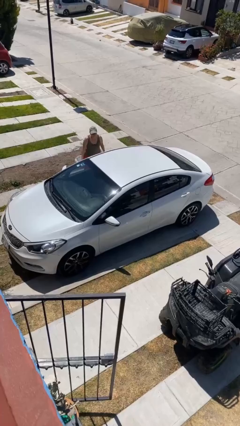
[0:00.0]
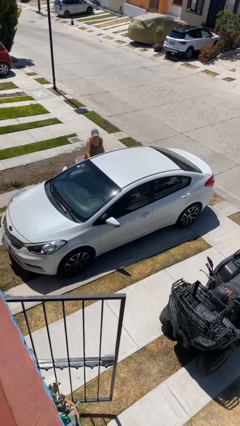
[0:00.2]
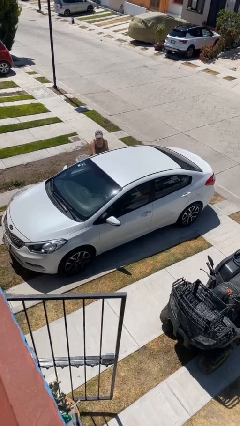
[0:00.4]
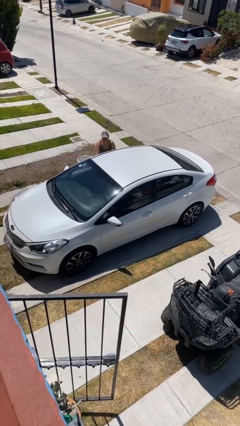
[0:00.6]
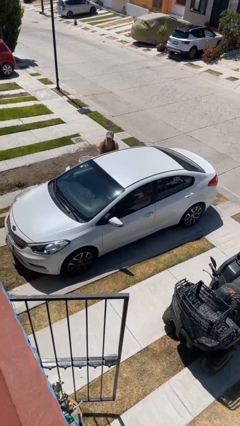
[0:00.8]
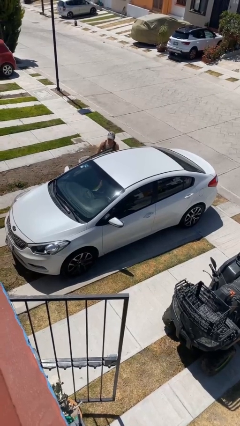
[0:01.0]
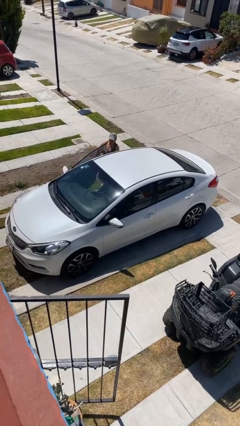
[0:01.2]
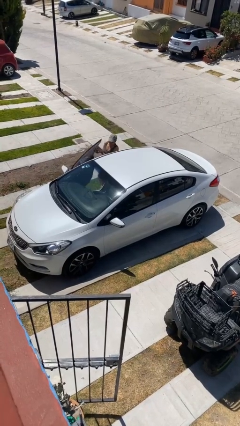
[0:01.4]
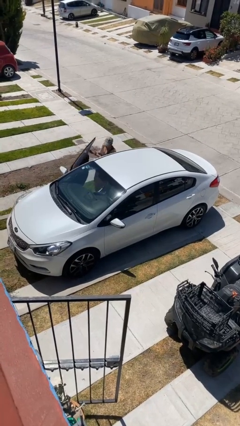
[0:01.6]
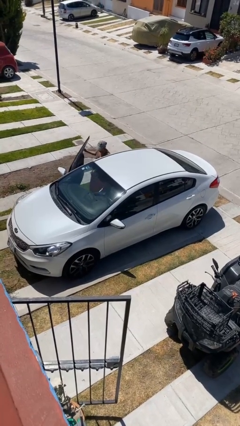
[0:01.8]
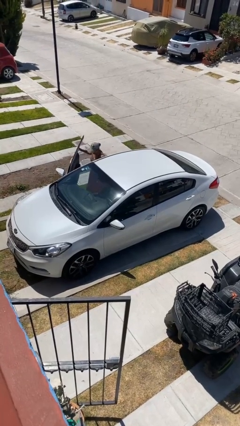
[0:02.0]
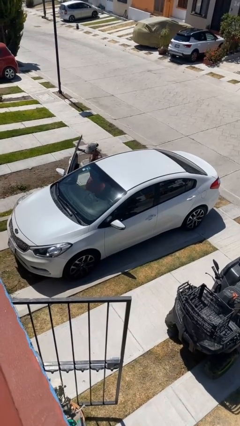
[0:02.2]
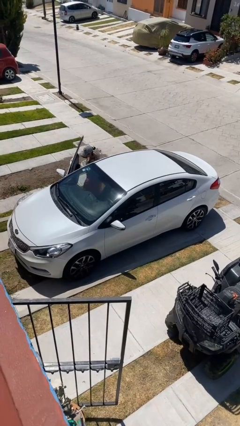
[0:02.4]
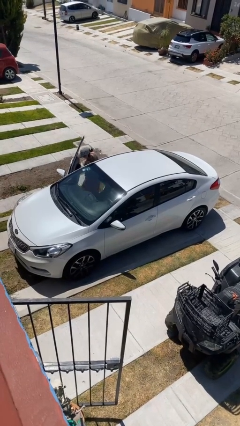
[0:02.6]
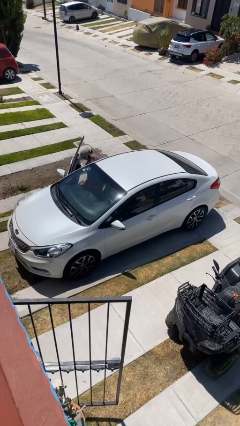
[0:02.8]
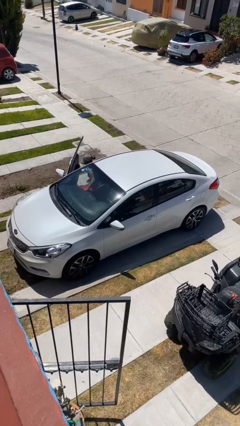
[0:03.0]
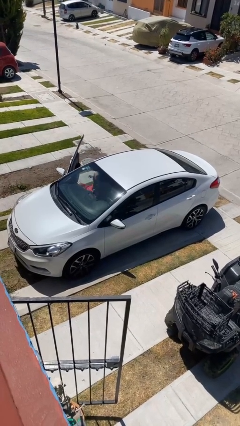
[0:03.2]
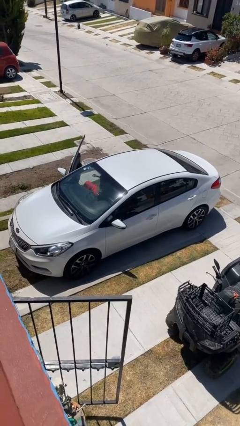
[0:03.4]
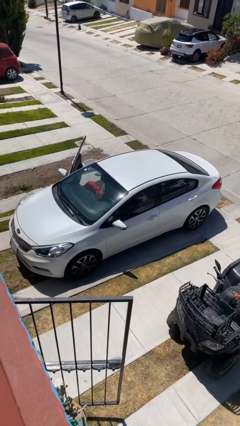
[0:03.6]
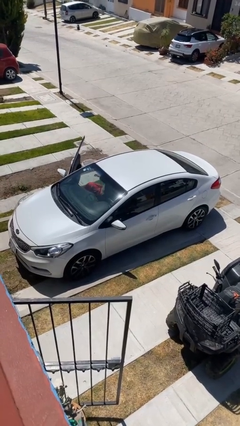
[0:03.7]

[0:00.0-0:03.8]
car picks up person

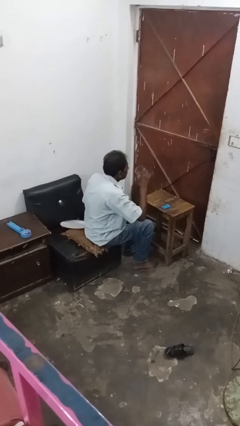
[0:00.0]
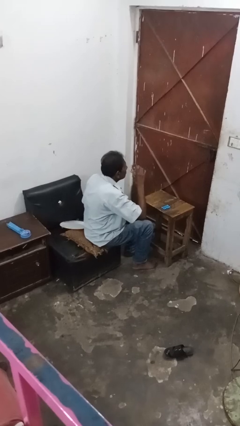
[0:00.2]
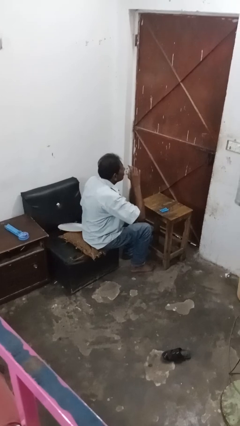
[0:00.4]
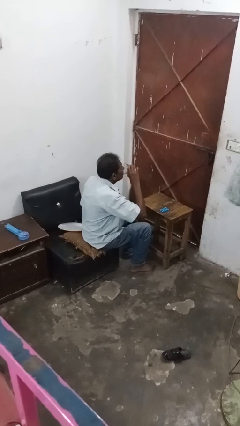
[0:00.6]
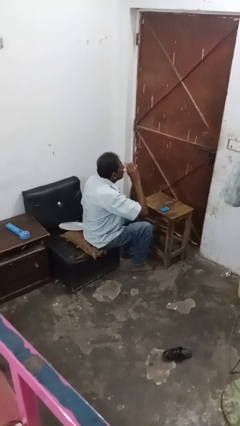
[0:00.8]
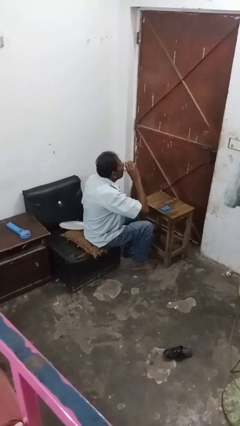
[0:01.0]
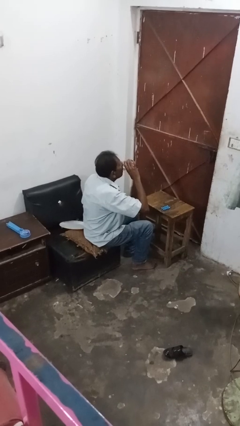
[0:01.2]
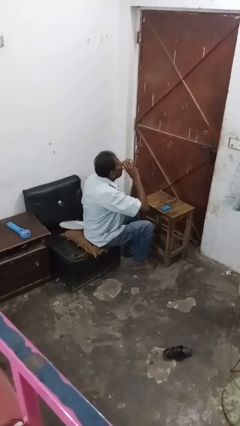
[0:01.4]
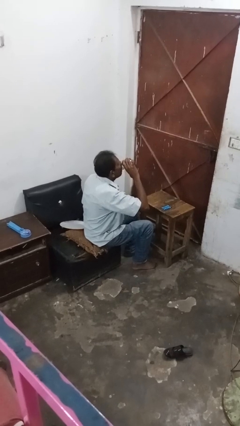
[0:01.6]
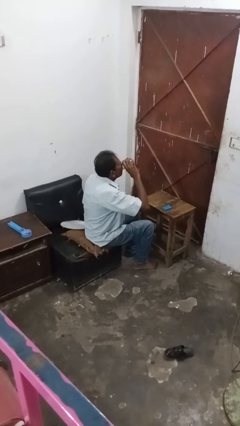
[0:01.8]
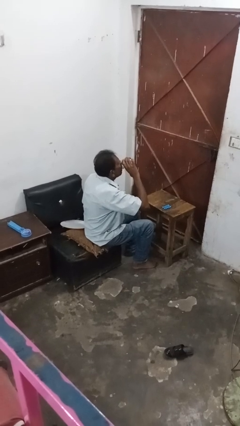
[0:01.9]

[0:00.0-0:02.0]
person drinks from cup

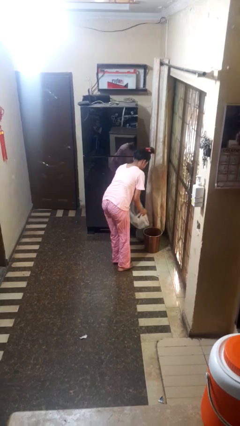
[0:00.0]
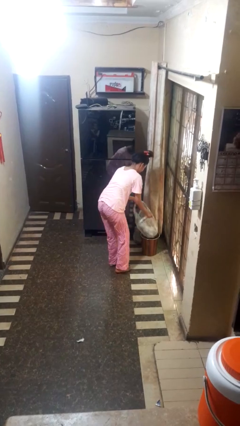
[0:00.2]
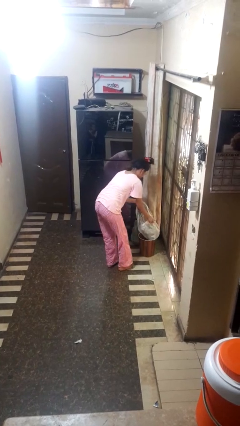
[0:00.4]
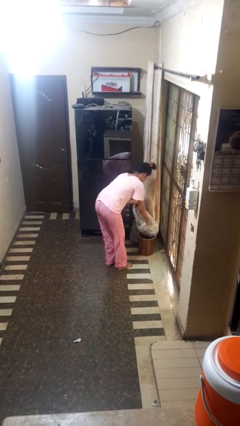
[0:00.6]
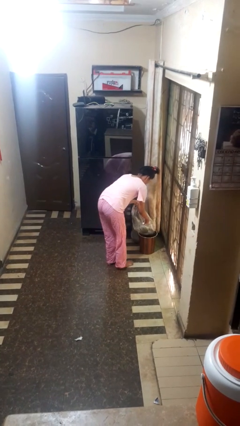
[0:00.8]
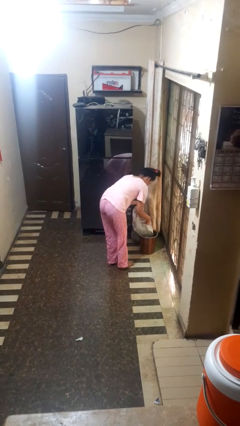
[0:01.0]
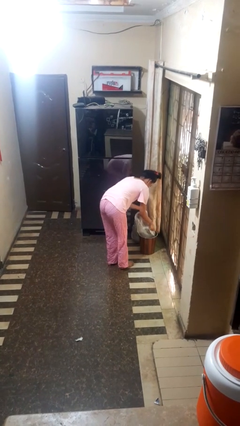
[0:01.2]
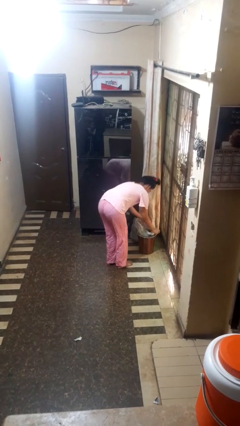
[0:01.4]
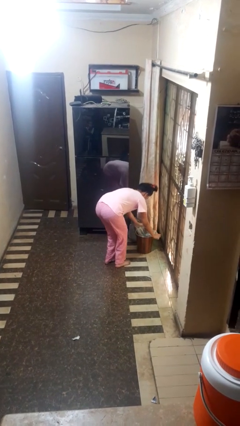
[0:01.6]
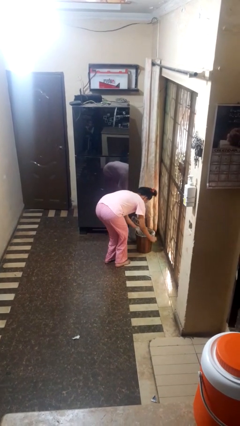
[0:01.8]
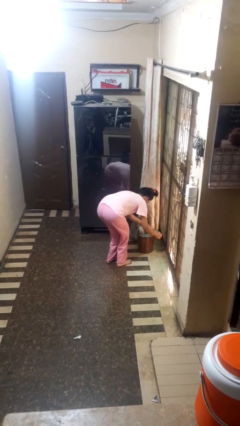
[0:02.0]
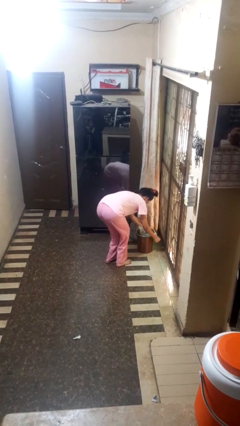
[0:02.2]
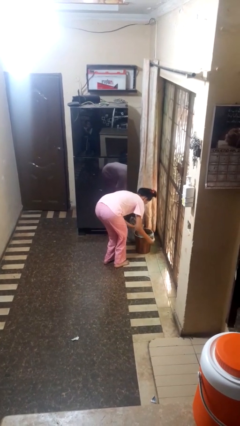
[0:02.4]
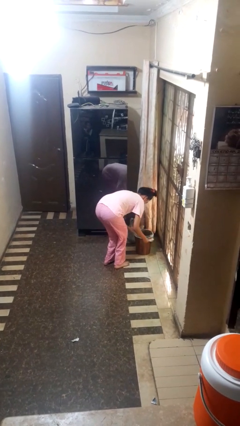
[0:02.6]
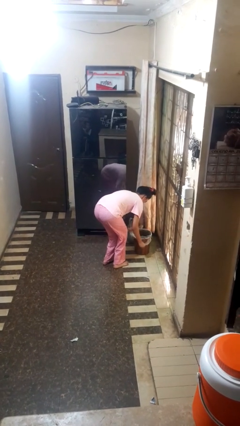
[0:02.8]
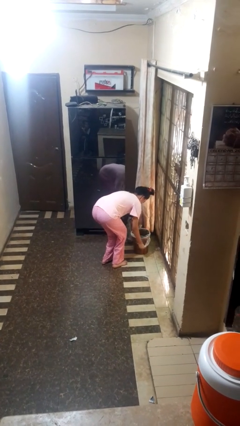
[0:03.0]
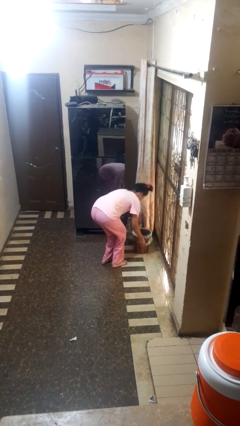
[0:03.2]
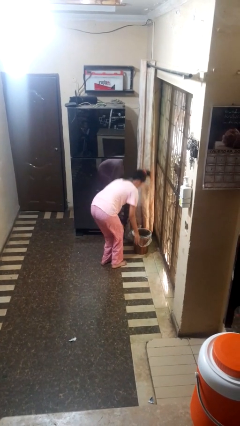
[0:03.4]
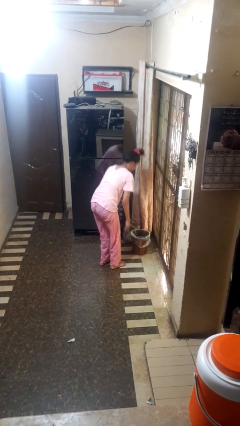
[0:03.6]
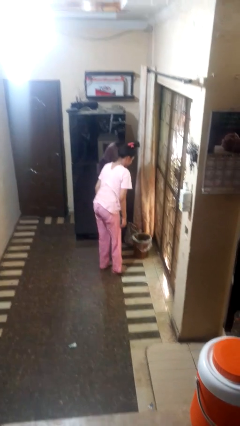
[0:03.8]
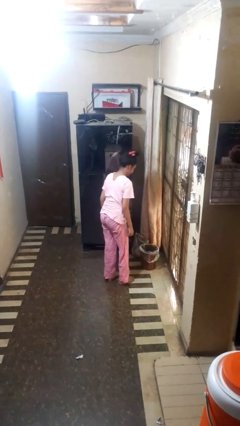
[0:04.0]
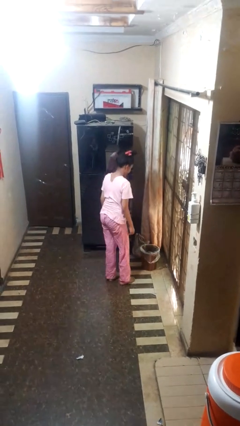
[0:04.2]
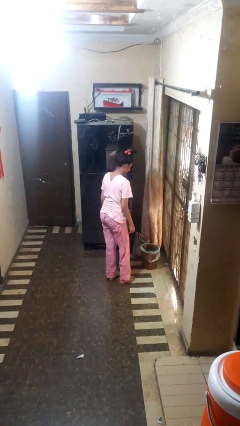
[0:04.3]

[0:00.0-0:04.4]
person inserts trashbag into trashcan

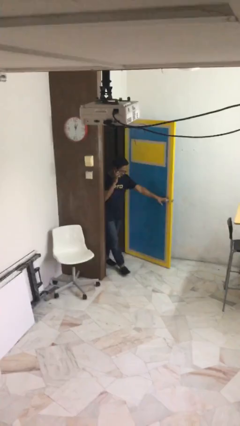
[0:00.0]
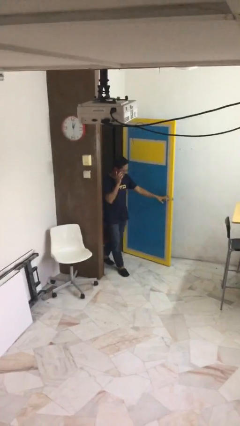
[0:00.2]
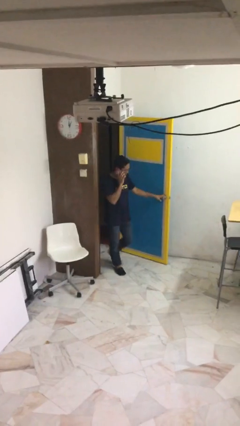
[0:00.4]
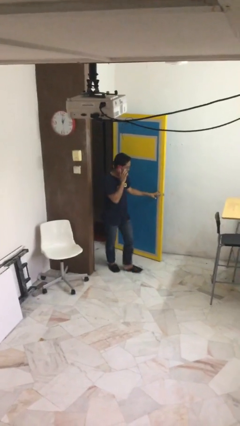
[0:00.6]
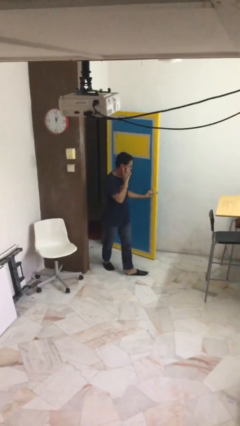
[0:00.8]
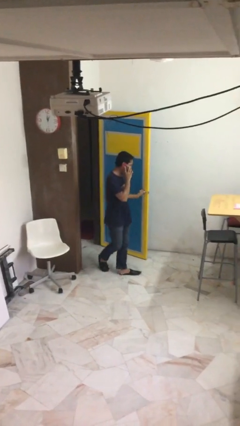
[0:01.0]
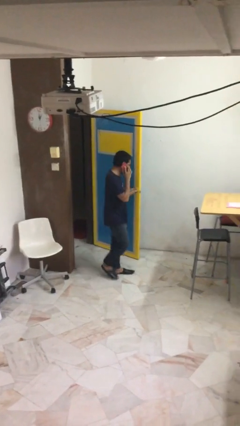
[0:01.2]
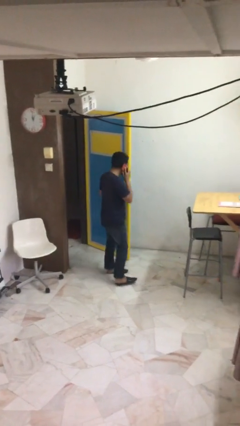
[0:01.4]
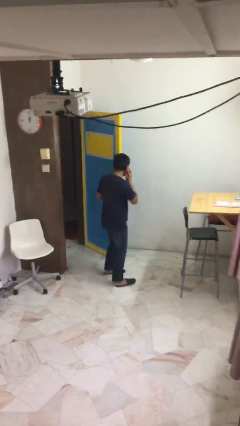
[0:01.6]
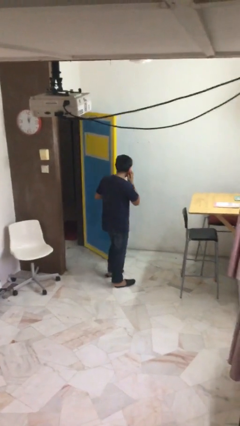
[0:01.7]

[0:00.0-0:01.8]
person enters scene through structure

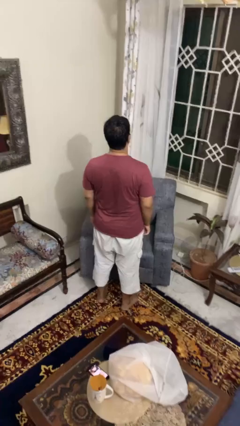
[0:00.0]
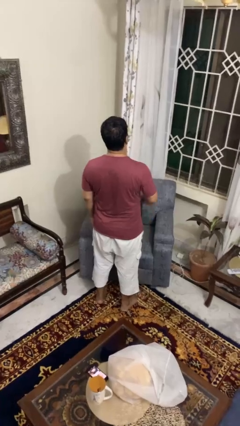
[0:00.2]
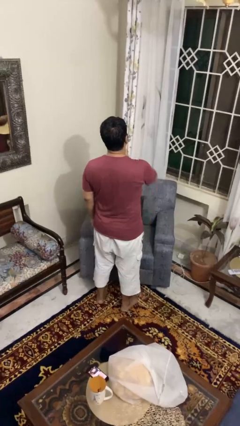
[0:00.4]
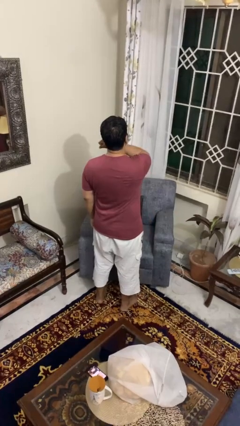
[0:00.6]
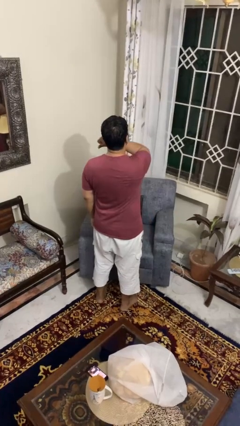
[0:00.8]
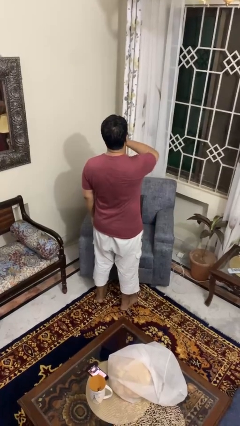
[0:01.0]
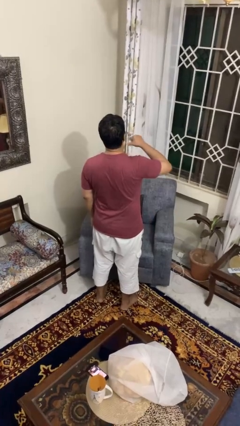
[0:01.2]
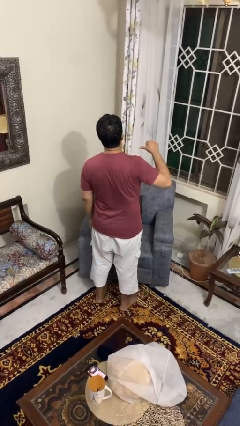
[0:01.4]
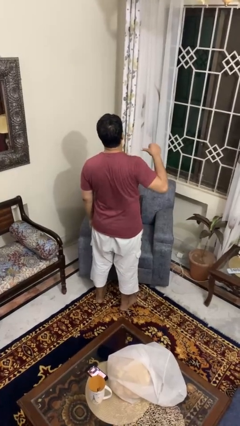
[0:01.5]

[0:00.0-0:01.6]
person gestures cut

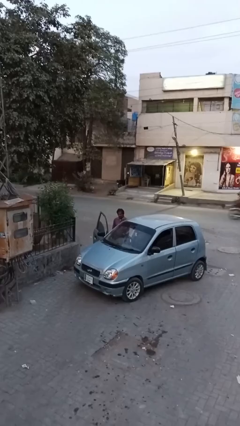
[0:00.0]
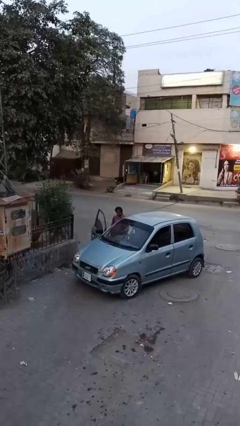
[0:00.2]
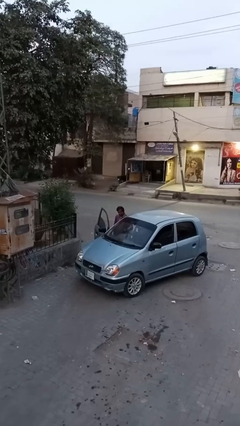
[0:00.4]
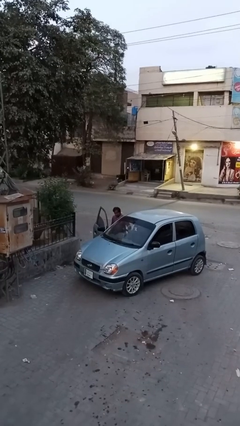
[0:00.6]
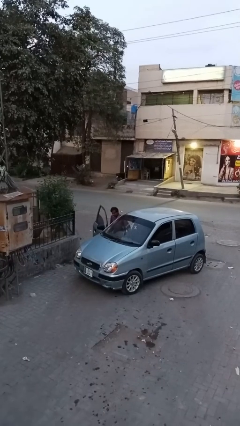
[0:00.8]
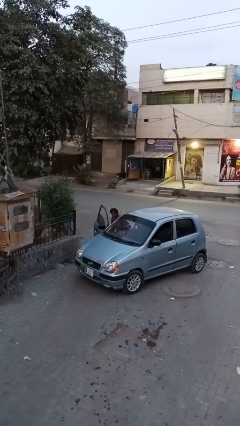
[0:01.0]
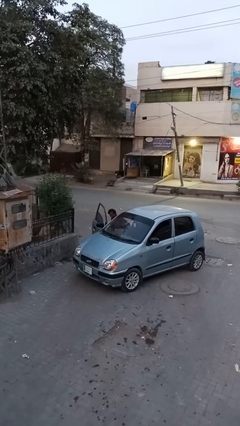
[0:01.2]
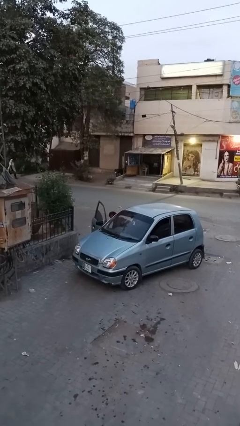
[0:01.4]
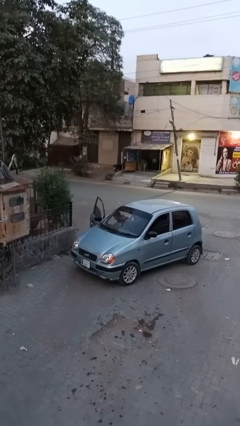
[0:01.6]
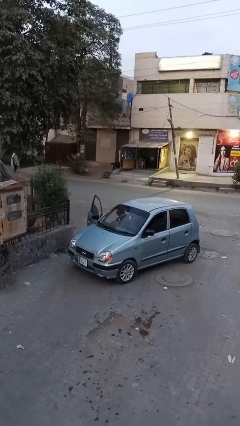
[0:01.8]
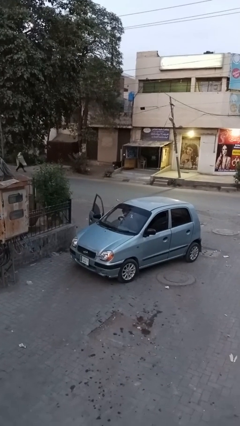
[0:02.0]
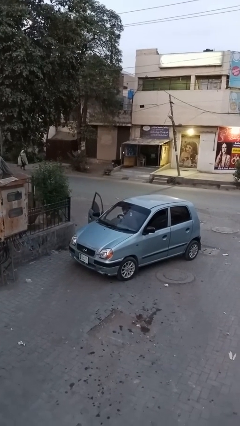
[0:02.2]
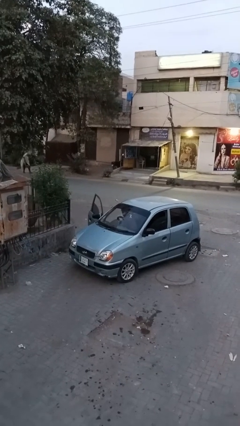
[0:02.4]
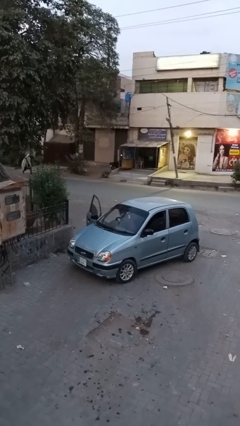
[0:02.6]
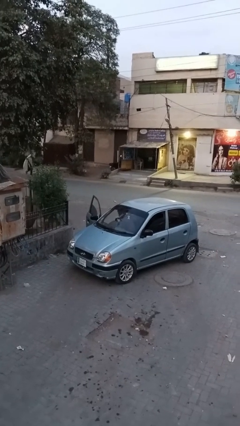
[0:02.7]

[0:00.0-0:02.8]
person enters car

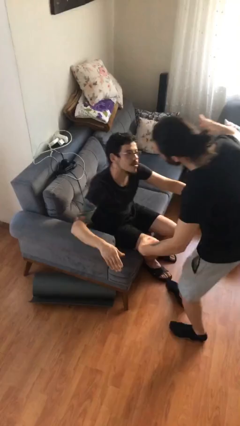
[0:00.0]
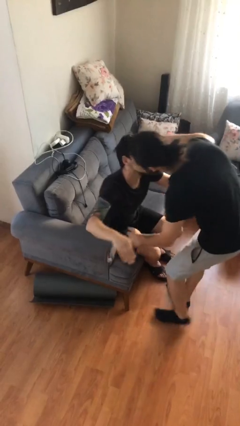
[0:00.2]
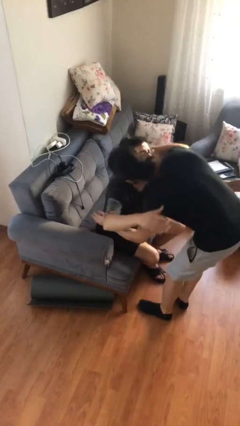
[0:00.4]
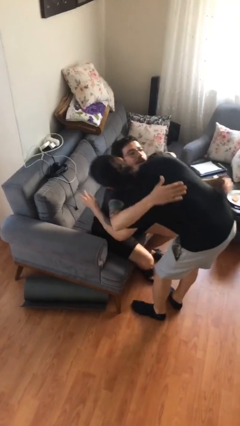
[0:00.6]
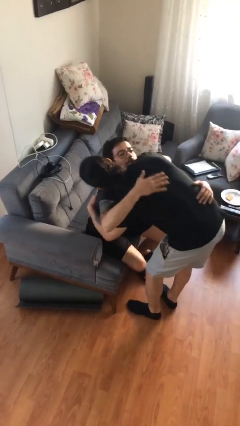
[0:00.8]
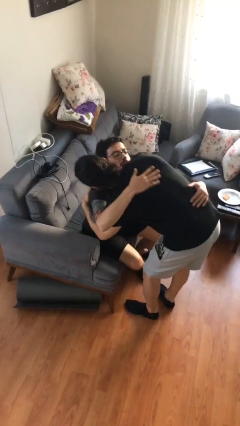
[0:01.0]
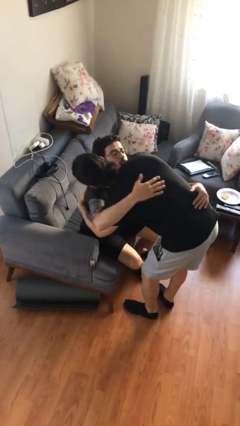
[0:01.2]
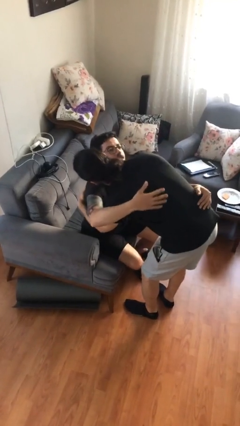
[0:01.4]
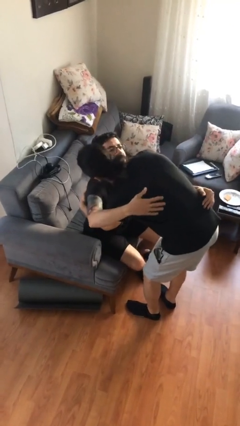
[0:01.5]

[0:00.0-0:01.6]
person embraces person
